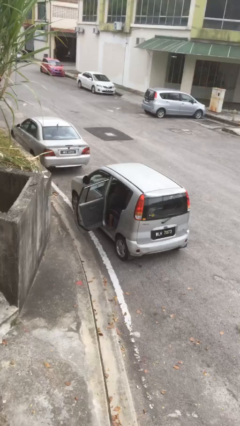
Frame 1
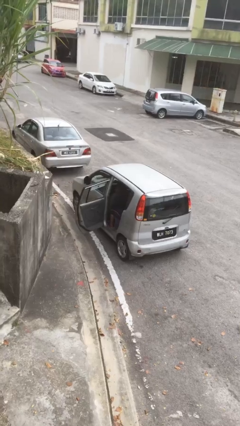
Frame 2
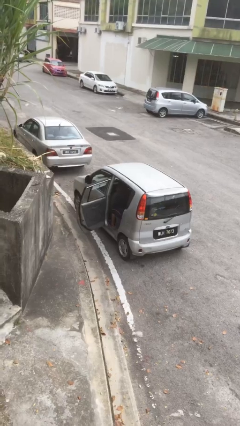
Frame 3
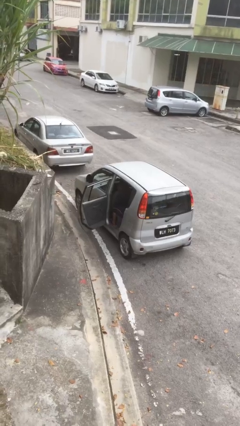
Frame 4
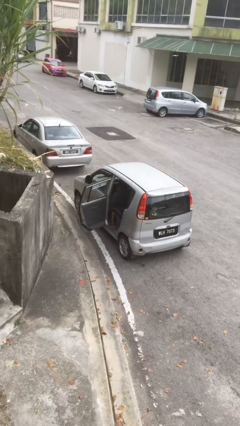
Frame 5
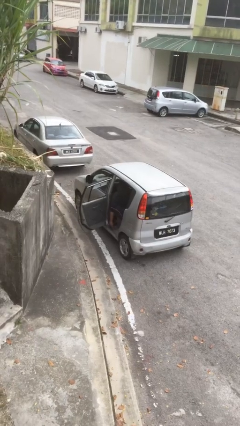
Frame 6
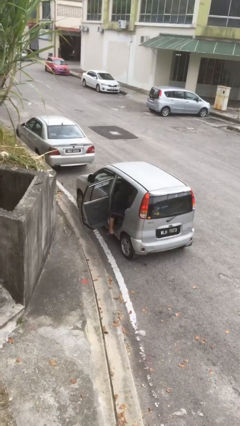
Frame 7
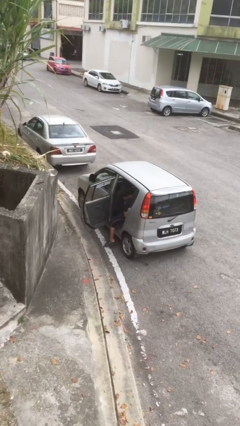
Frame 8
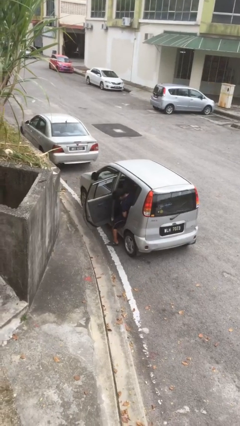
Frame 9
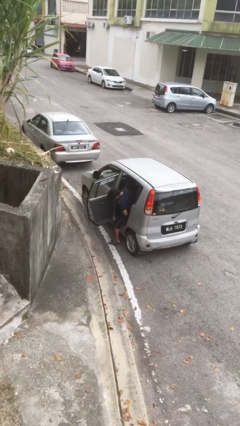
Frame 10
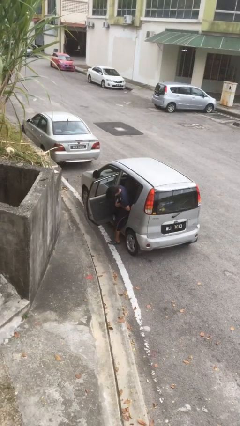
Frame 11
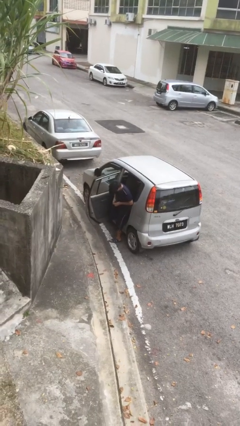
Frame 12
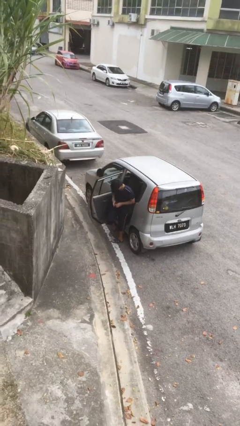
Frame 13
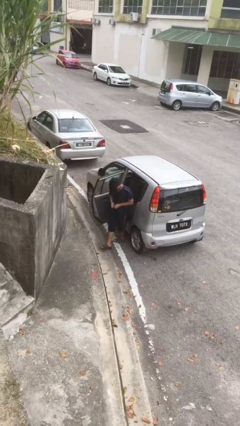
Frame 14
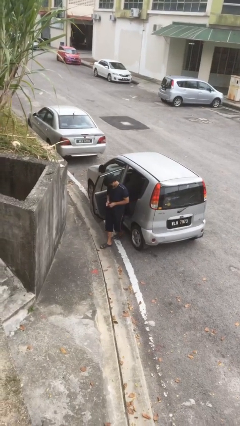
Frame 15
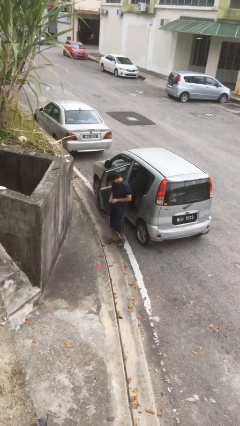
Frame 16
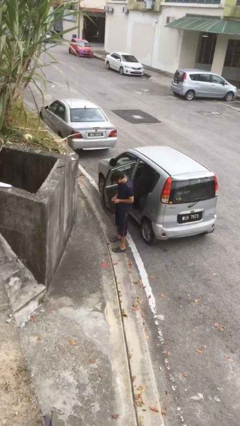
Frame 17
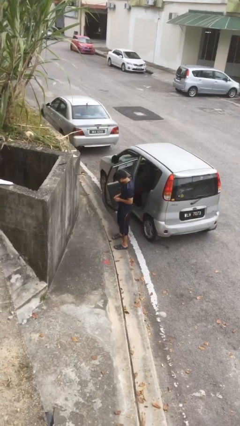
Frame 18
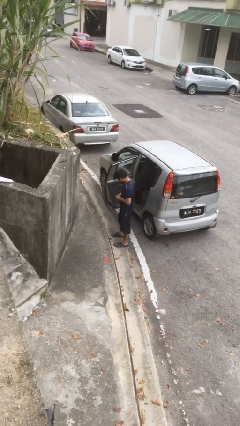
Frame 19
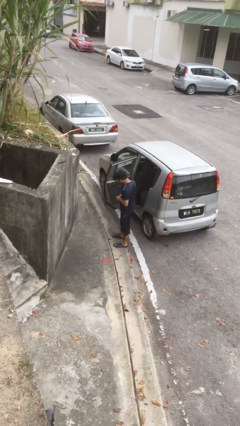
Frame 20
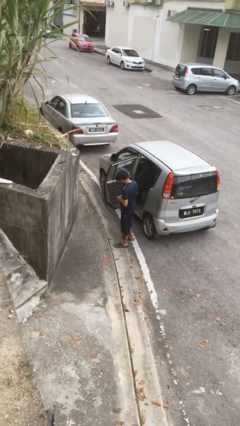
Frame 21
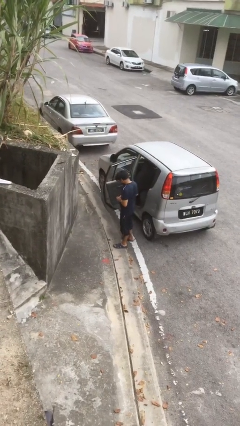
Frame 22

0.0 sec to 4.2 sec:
person exits car

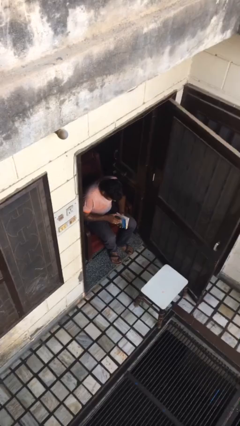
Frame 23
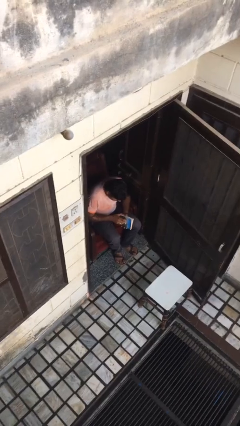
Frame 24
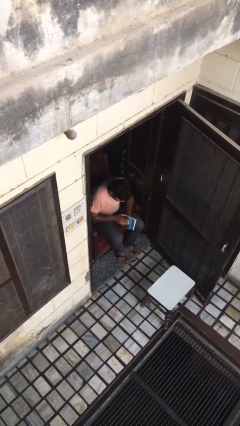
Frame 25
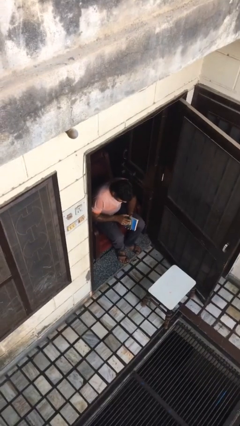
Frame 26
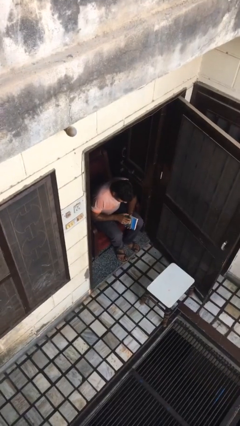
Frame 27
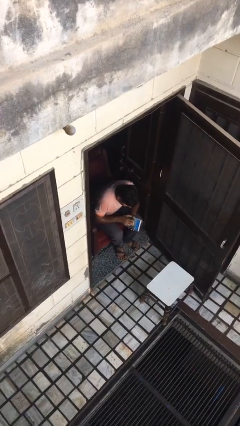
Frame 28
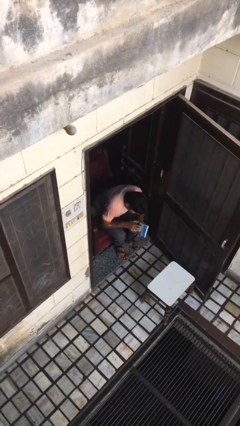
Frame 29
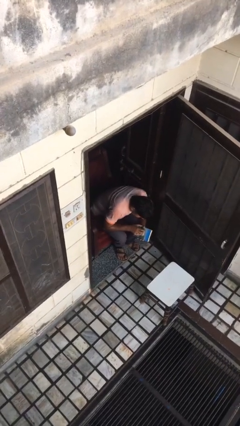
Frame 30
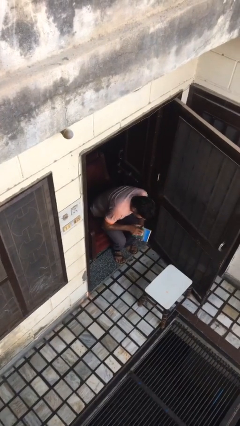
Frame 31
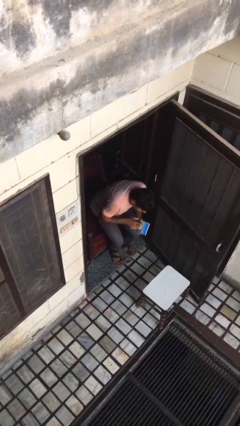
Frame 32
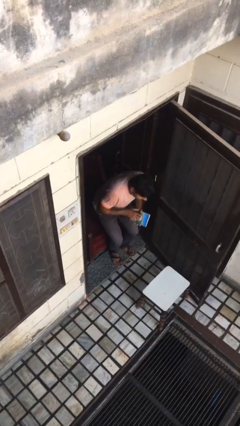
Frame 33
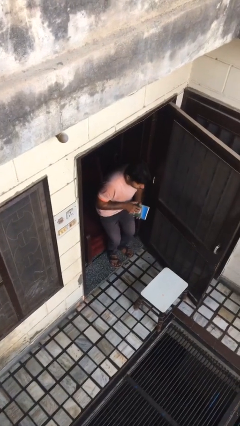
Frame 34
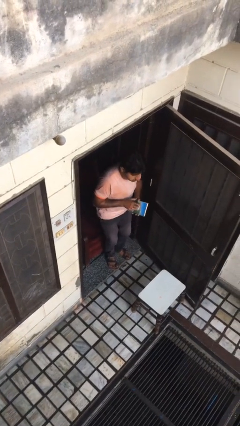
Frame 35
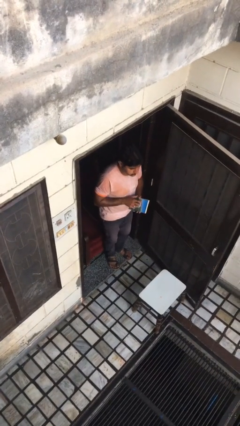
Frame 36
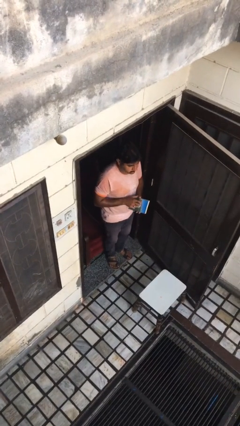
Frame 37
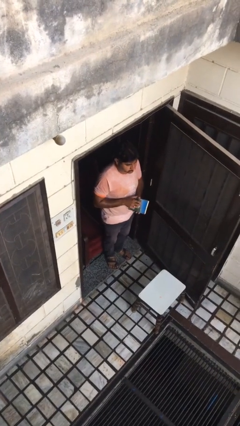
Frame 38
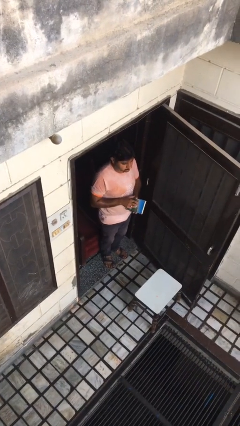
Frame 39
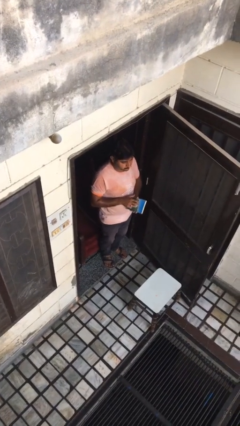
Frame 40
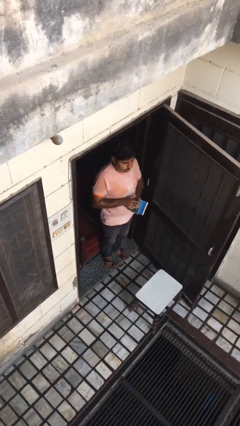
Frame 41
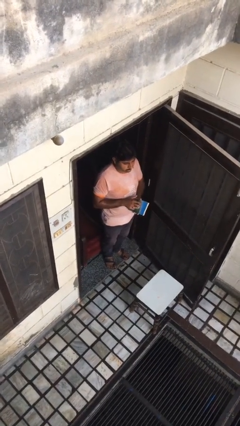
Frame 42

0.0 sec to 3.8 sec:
person stands up

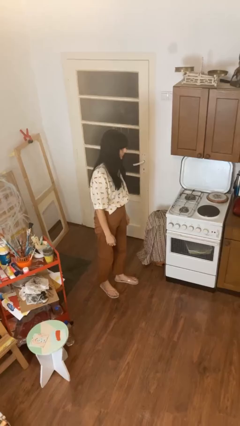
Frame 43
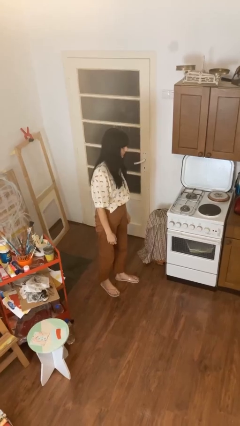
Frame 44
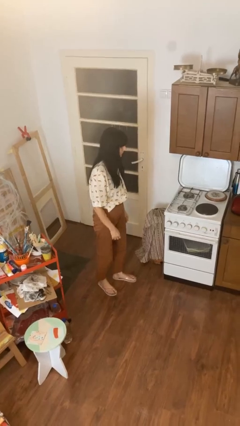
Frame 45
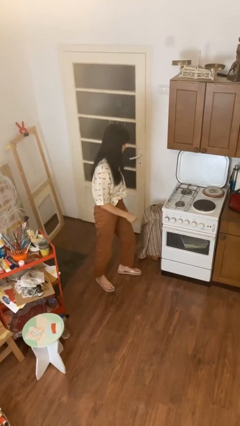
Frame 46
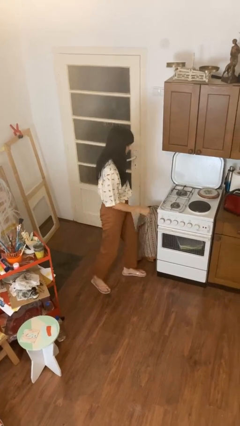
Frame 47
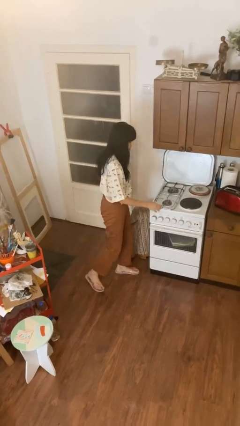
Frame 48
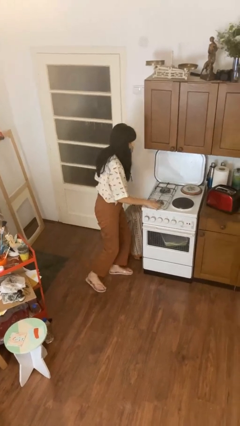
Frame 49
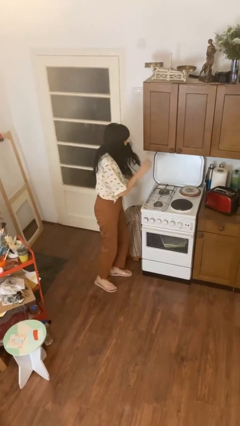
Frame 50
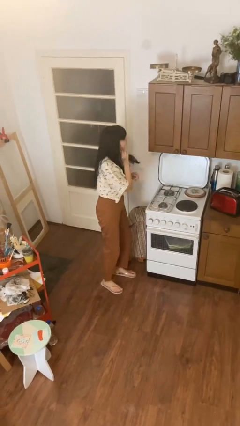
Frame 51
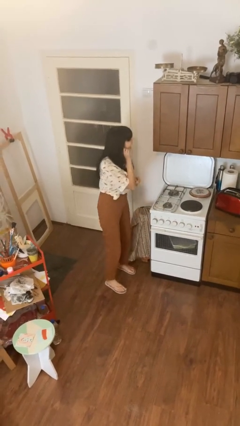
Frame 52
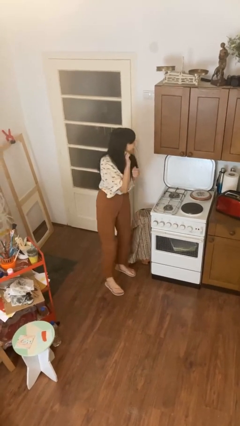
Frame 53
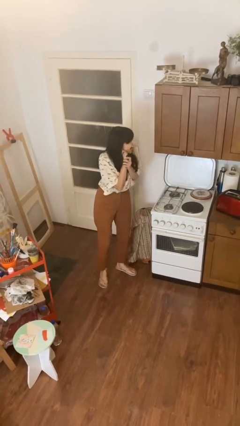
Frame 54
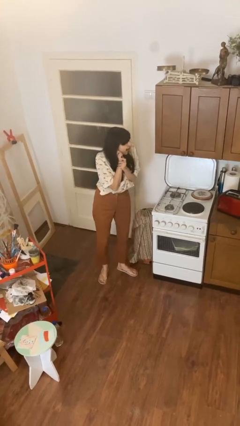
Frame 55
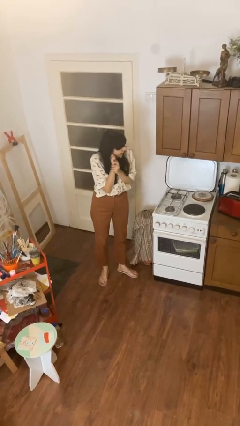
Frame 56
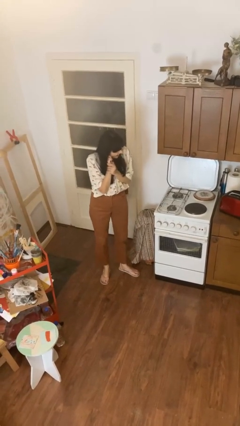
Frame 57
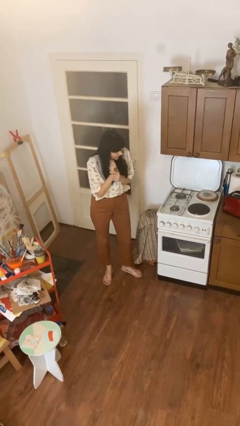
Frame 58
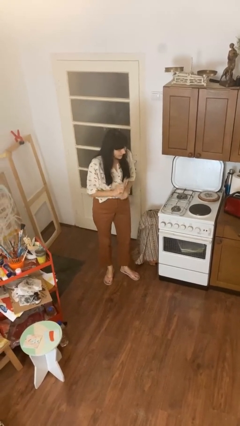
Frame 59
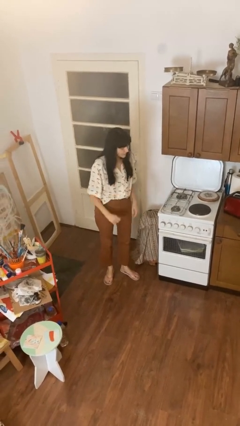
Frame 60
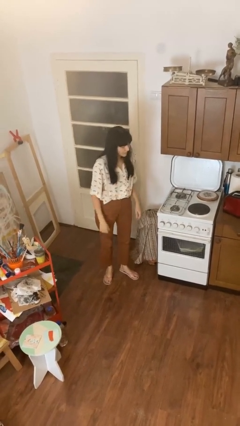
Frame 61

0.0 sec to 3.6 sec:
person burns hand

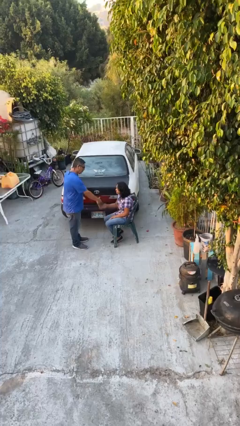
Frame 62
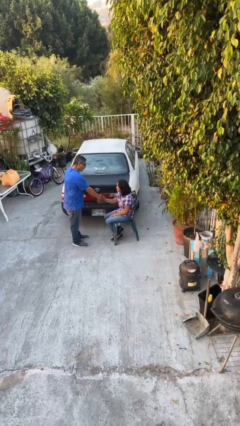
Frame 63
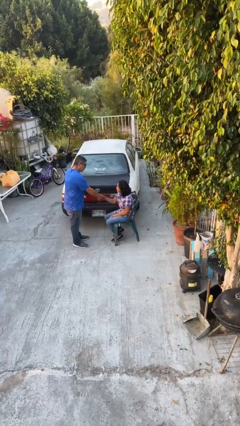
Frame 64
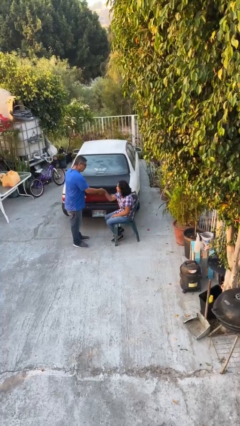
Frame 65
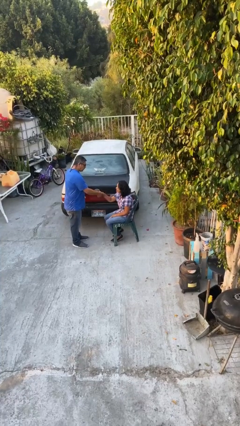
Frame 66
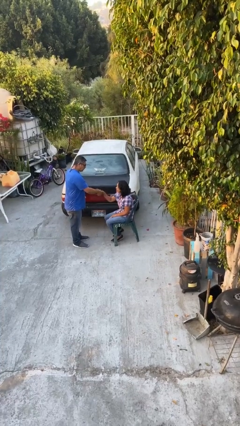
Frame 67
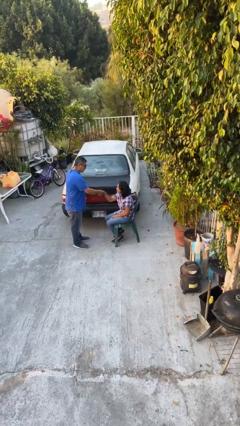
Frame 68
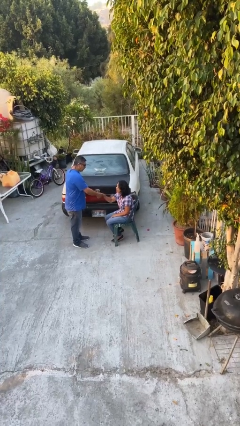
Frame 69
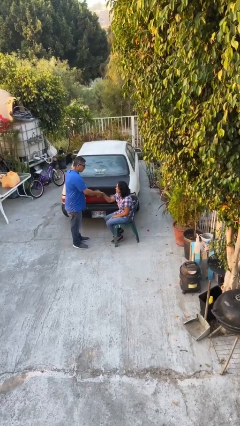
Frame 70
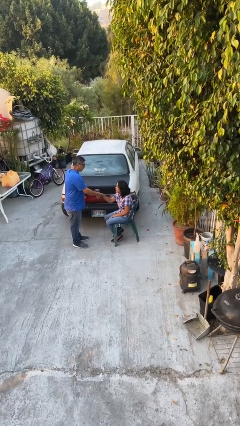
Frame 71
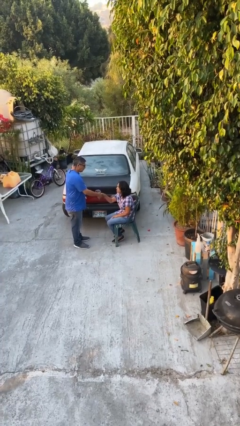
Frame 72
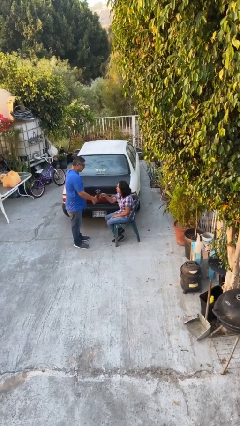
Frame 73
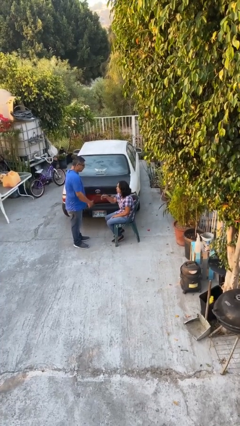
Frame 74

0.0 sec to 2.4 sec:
person shakes hand

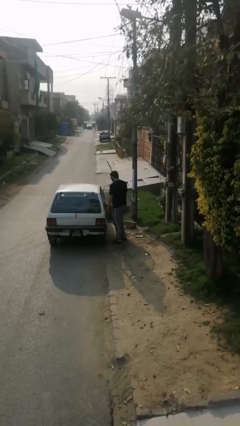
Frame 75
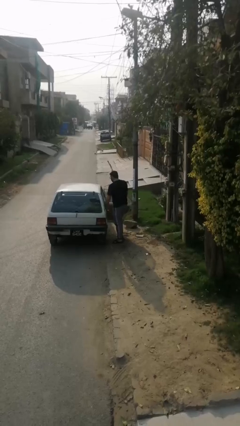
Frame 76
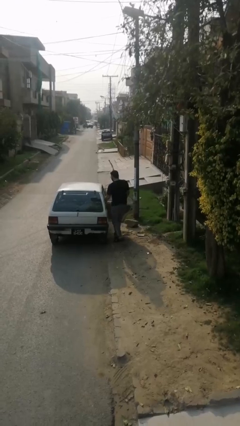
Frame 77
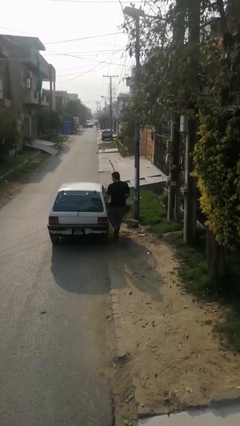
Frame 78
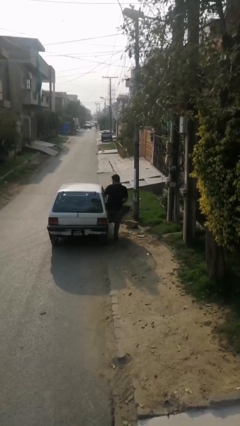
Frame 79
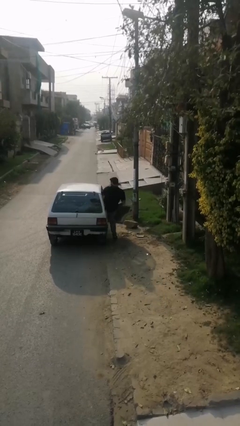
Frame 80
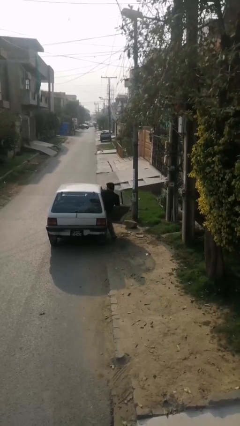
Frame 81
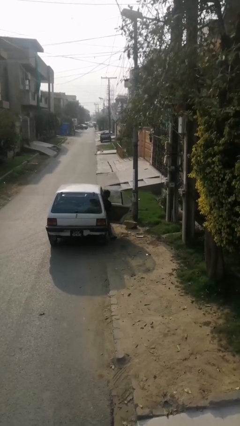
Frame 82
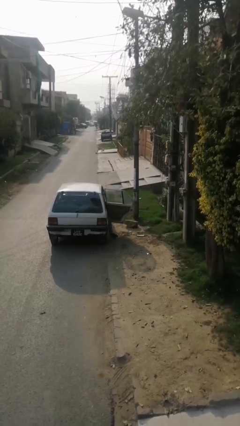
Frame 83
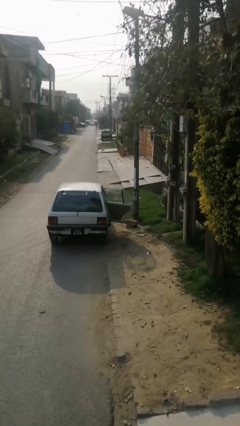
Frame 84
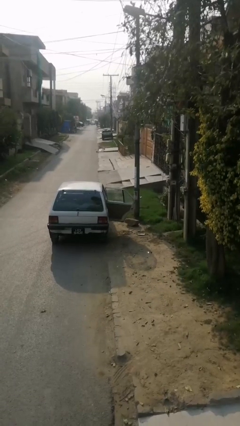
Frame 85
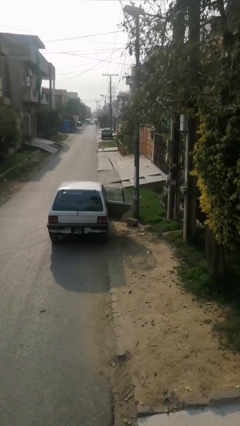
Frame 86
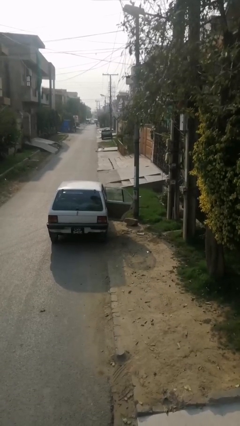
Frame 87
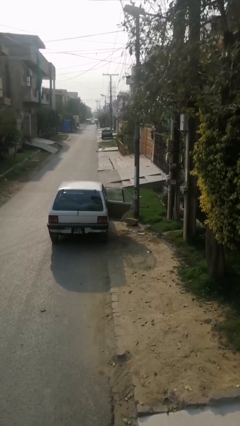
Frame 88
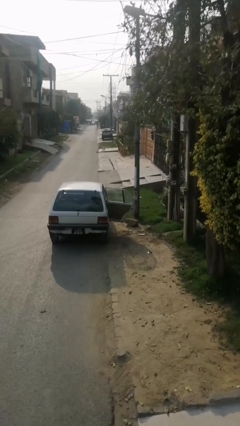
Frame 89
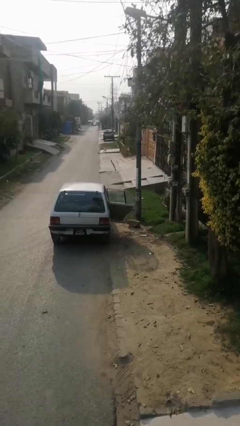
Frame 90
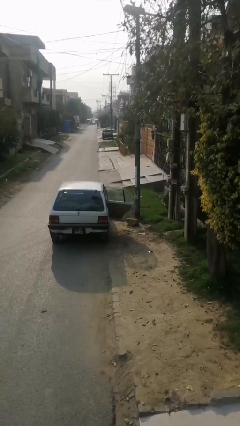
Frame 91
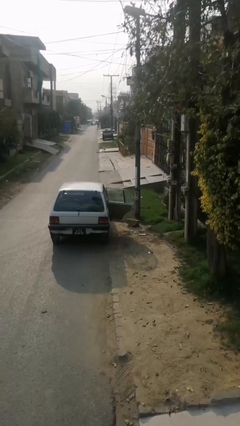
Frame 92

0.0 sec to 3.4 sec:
person enters car

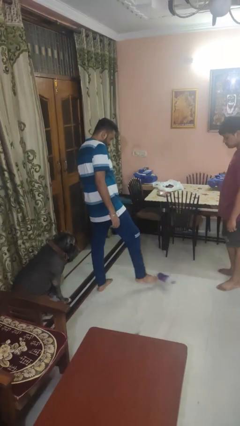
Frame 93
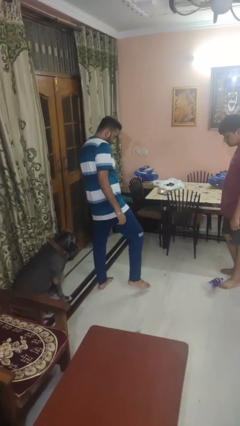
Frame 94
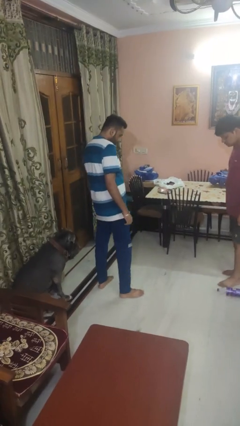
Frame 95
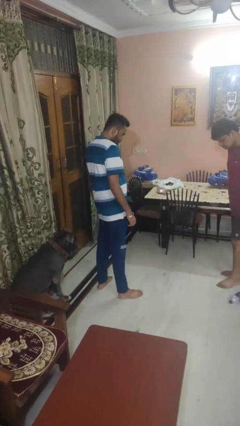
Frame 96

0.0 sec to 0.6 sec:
person kicks object to person
